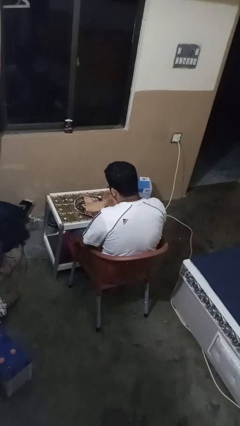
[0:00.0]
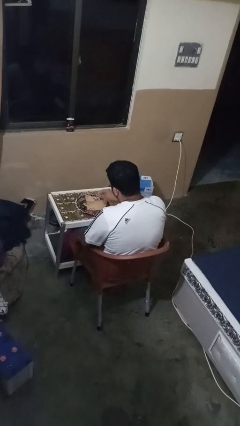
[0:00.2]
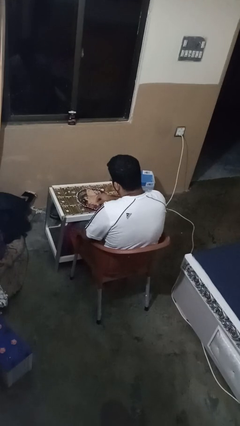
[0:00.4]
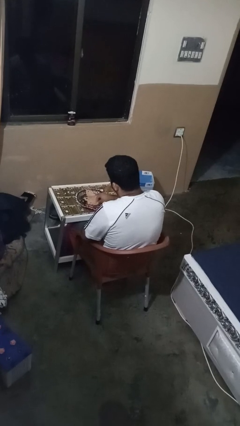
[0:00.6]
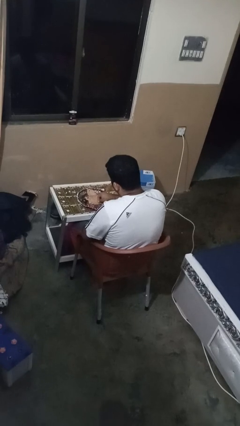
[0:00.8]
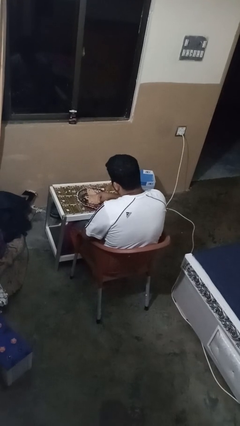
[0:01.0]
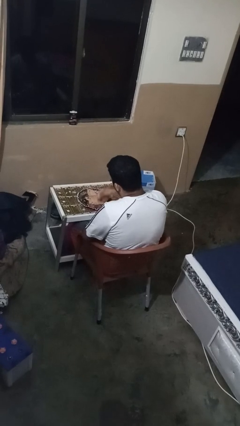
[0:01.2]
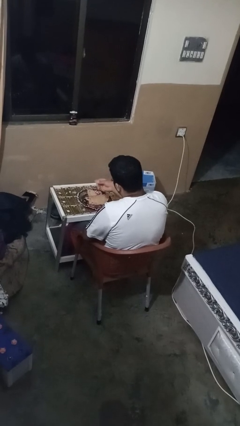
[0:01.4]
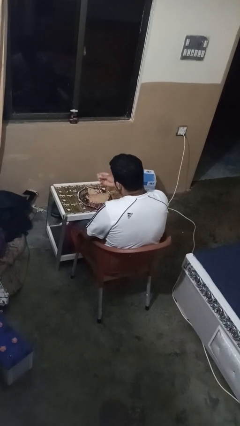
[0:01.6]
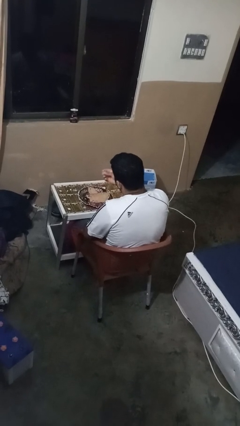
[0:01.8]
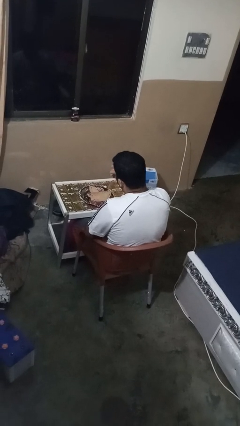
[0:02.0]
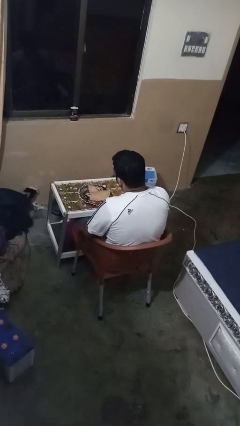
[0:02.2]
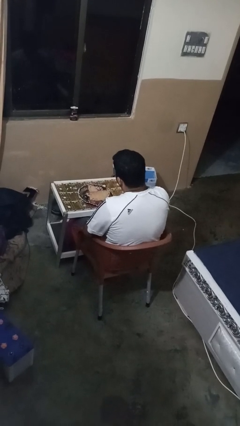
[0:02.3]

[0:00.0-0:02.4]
person eats with hands

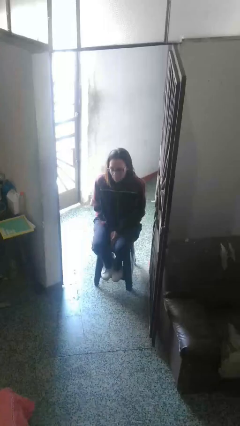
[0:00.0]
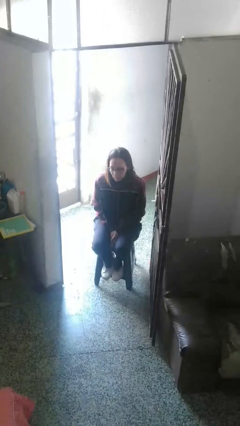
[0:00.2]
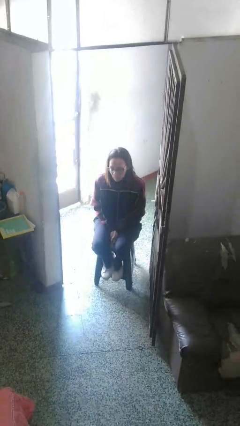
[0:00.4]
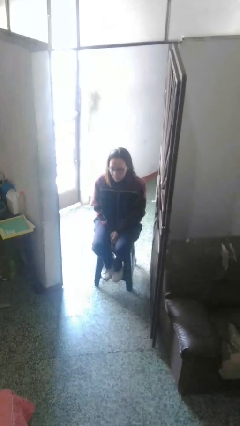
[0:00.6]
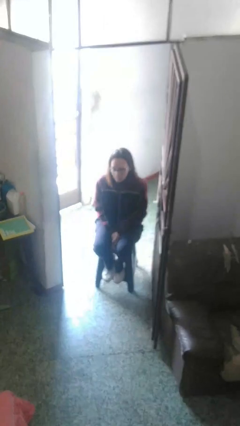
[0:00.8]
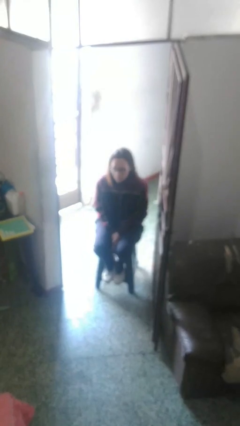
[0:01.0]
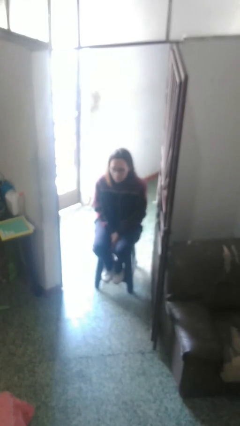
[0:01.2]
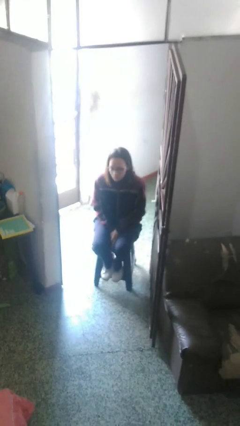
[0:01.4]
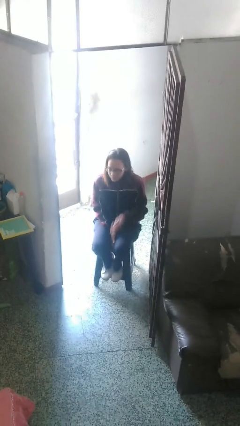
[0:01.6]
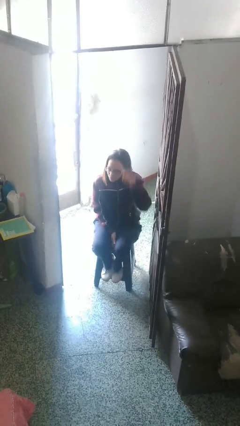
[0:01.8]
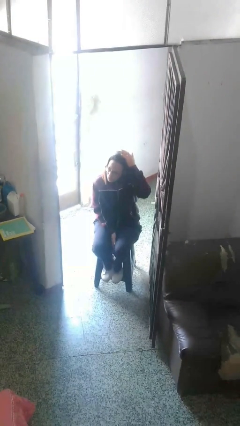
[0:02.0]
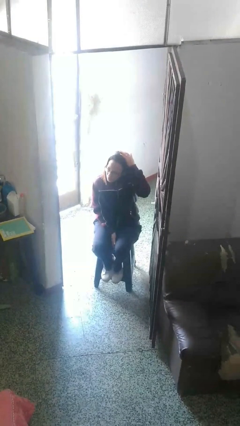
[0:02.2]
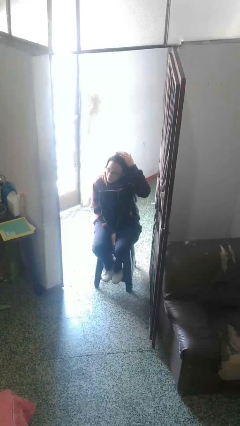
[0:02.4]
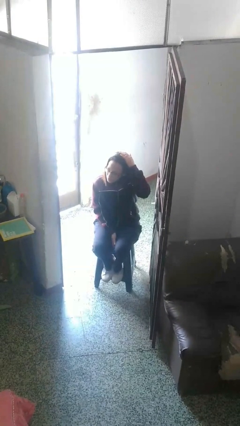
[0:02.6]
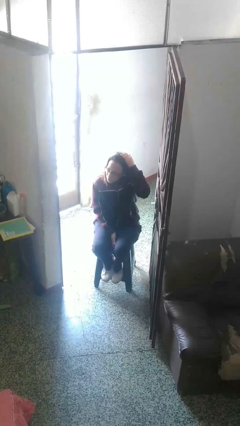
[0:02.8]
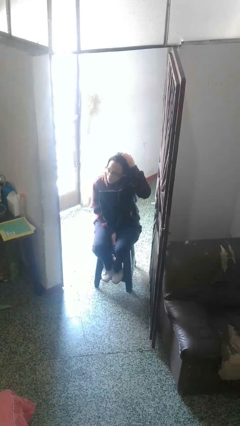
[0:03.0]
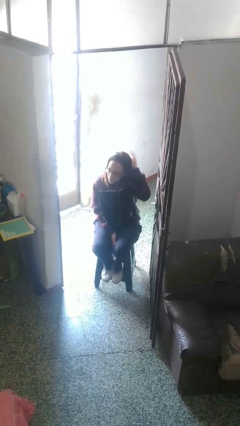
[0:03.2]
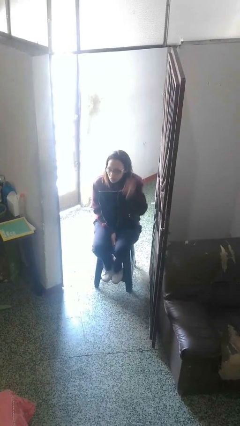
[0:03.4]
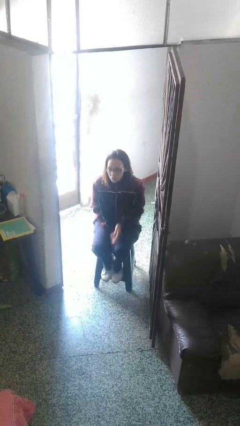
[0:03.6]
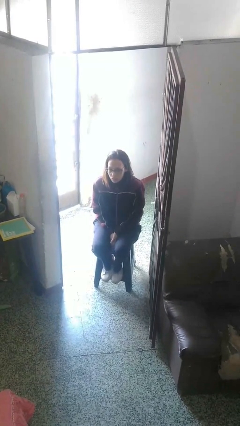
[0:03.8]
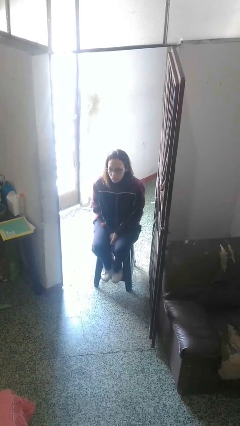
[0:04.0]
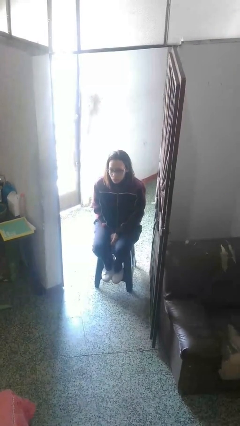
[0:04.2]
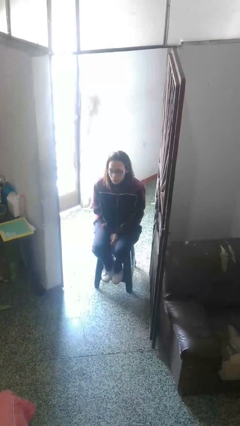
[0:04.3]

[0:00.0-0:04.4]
person pats head

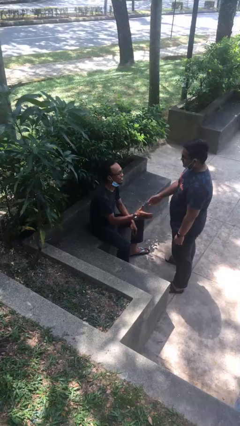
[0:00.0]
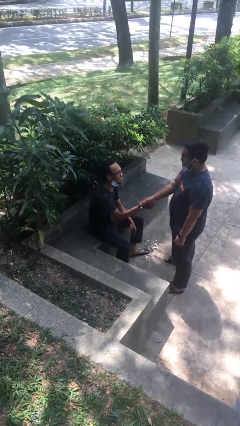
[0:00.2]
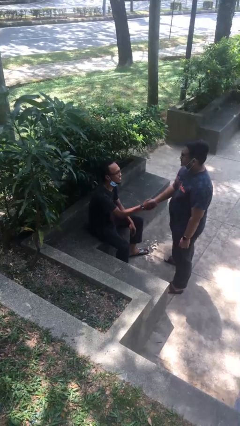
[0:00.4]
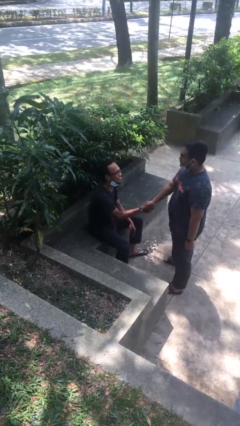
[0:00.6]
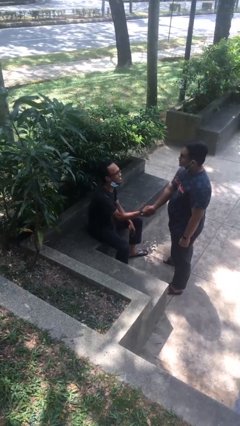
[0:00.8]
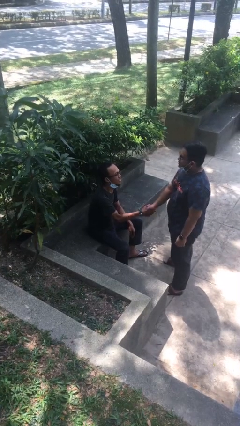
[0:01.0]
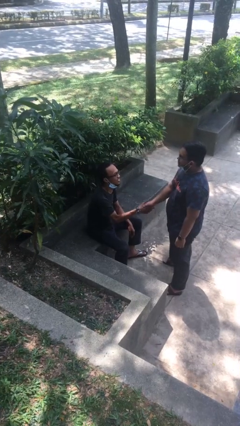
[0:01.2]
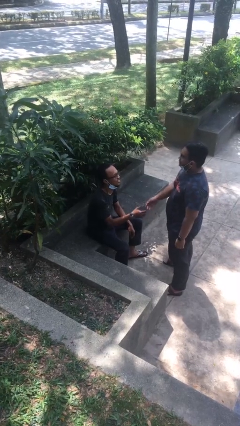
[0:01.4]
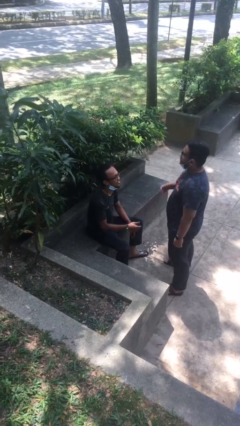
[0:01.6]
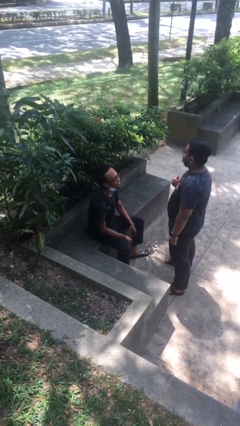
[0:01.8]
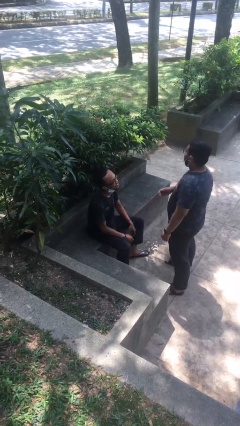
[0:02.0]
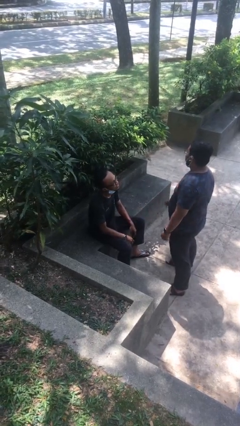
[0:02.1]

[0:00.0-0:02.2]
person shakes hand

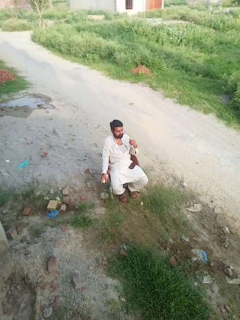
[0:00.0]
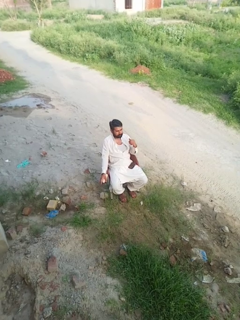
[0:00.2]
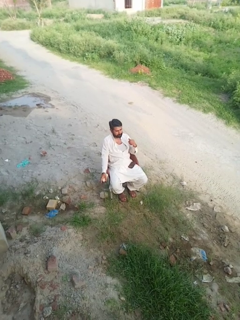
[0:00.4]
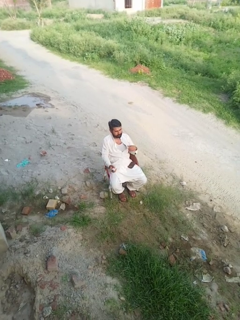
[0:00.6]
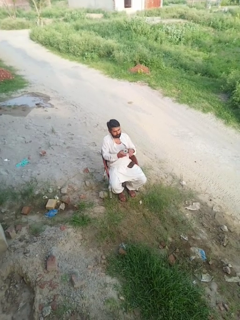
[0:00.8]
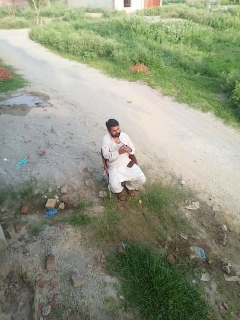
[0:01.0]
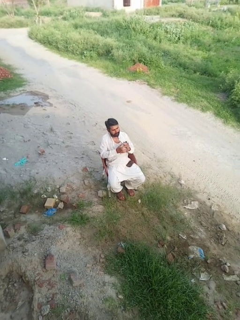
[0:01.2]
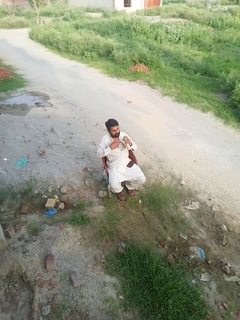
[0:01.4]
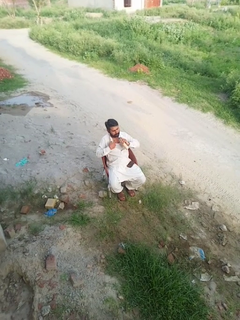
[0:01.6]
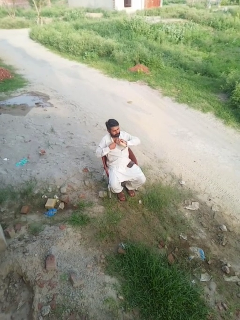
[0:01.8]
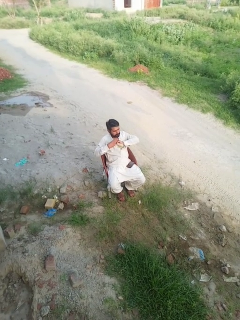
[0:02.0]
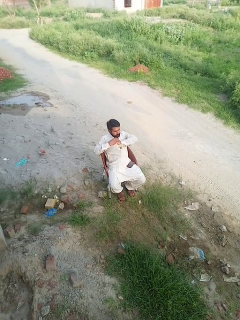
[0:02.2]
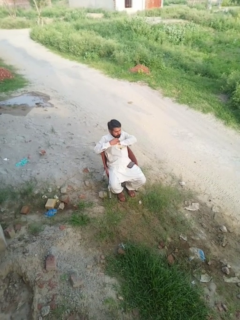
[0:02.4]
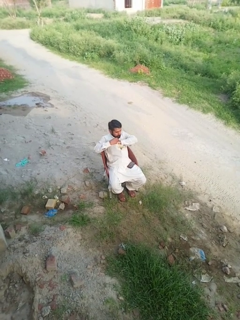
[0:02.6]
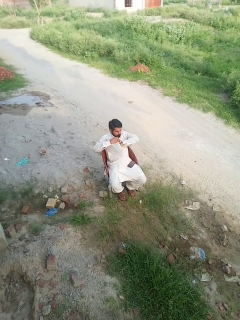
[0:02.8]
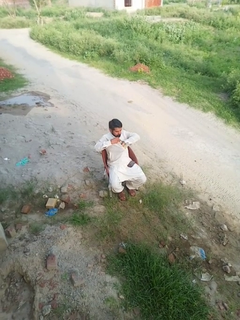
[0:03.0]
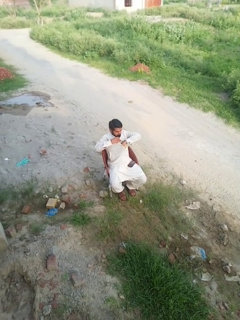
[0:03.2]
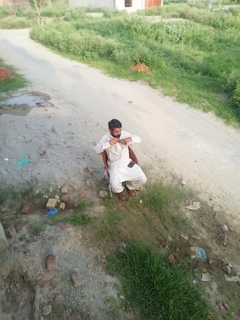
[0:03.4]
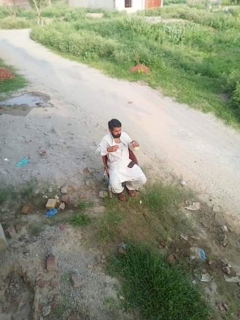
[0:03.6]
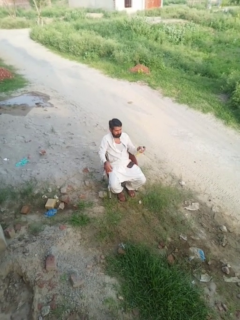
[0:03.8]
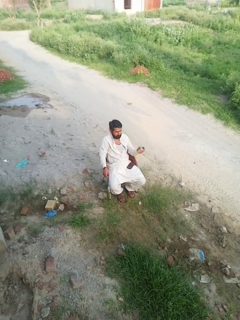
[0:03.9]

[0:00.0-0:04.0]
person applies deodorant

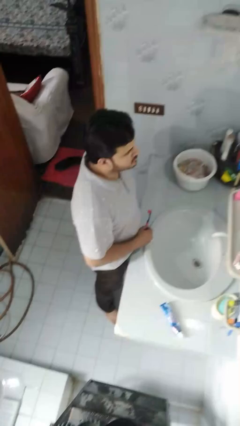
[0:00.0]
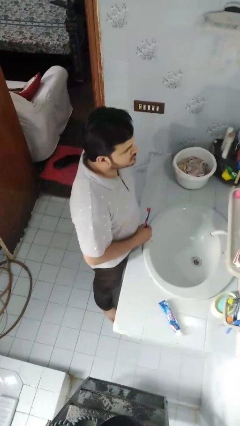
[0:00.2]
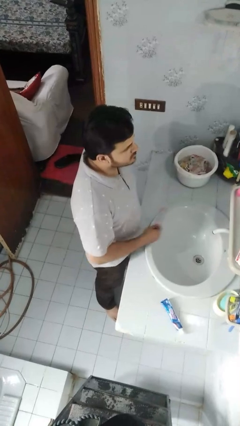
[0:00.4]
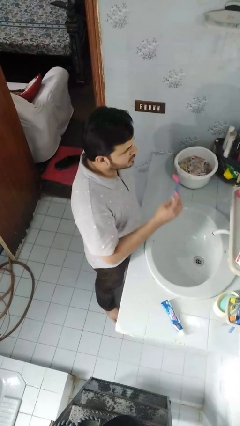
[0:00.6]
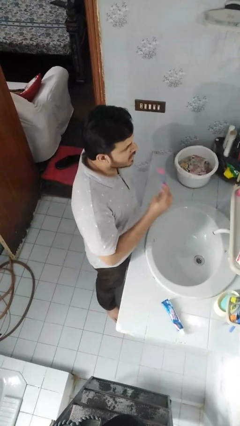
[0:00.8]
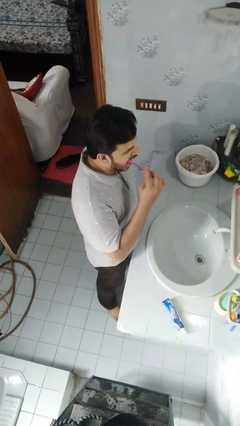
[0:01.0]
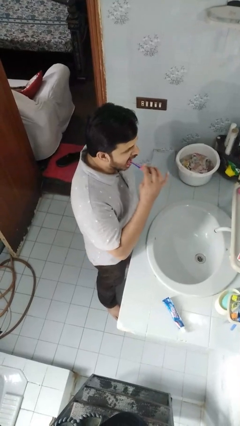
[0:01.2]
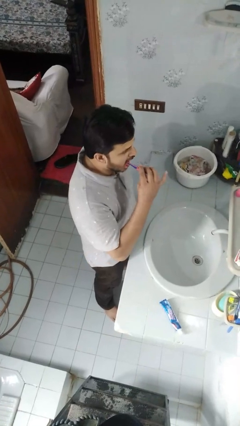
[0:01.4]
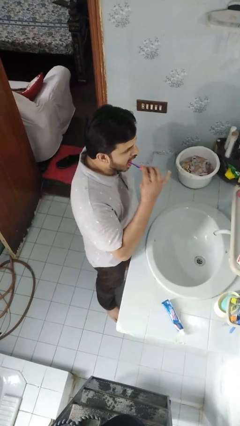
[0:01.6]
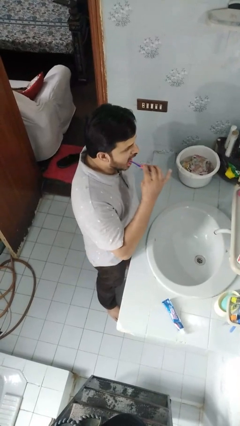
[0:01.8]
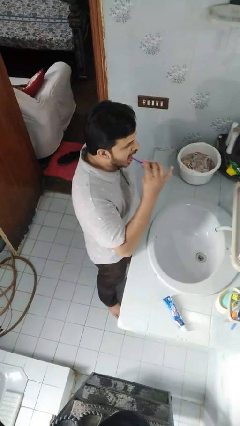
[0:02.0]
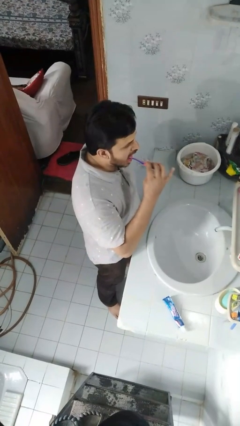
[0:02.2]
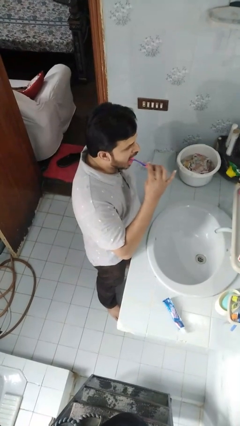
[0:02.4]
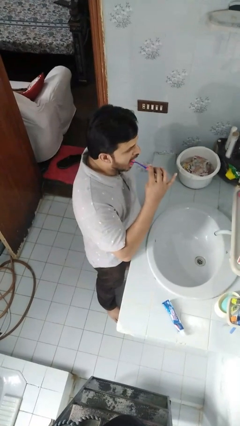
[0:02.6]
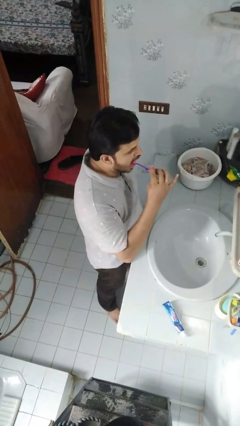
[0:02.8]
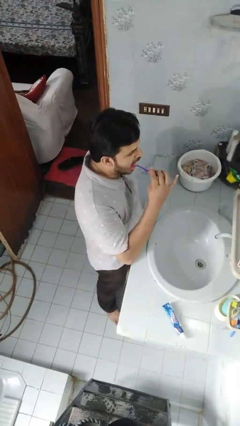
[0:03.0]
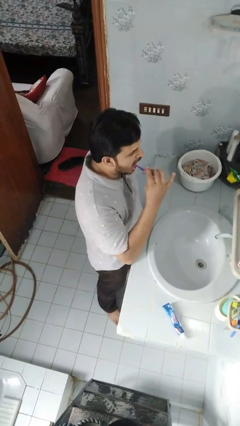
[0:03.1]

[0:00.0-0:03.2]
person brushes teeth

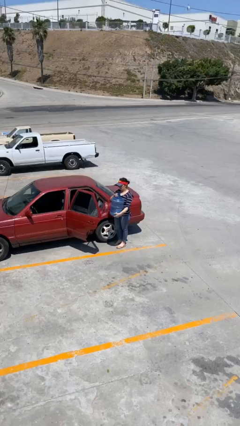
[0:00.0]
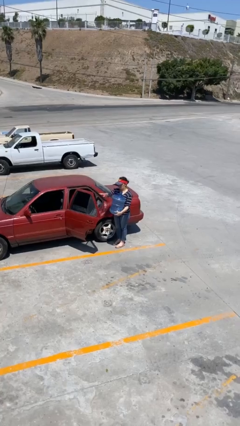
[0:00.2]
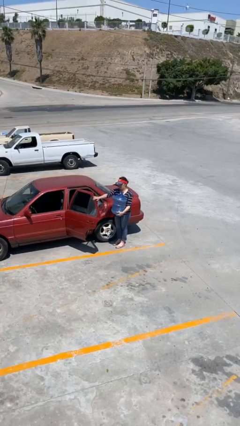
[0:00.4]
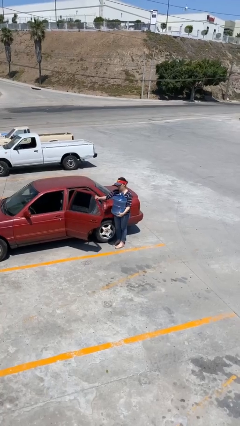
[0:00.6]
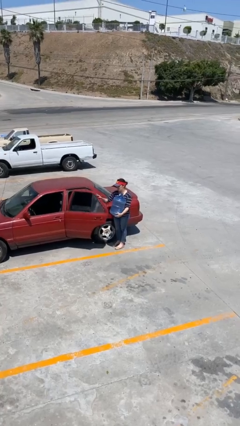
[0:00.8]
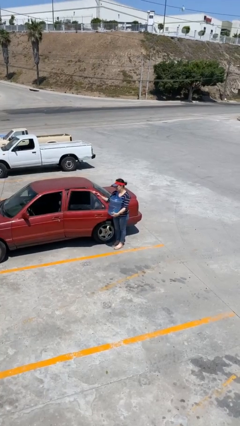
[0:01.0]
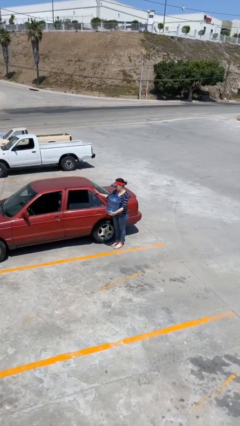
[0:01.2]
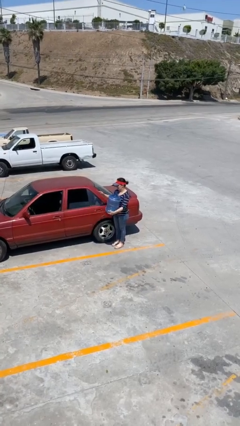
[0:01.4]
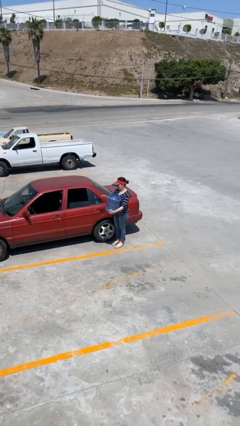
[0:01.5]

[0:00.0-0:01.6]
person closes car door

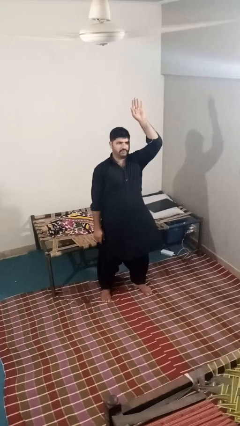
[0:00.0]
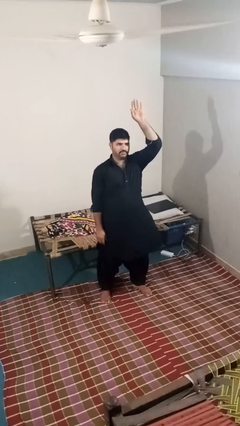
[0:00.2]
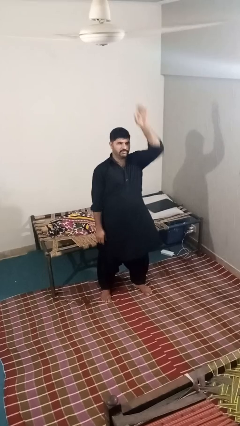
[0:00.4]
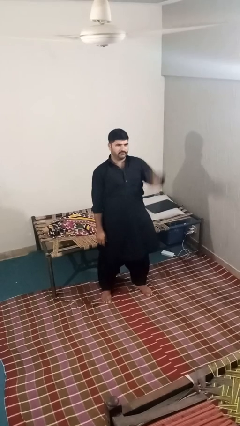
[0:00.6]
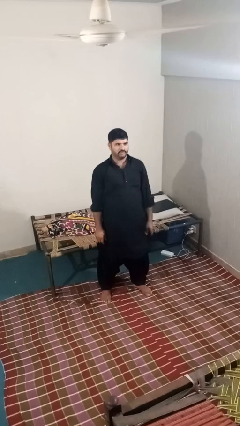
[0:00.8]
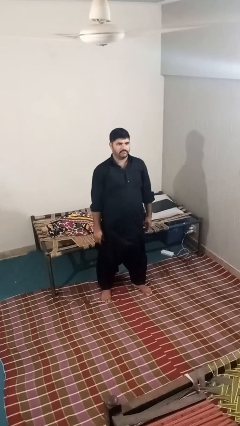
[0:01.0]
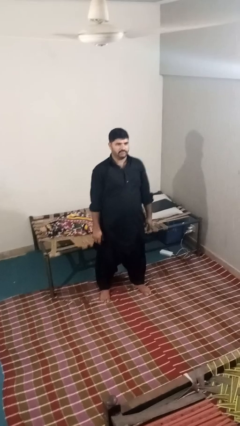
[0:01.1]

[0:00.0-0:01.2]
person gestures lower hand
